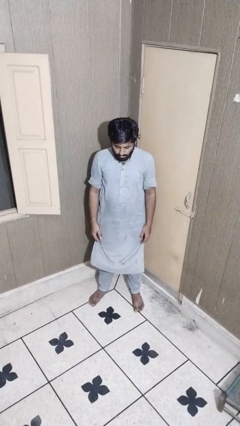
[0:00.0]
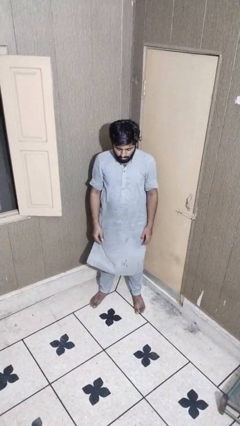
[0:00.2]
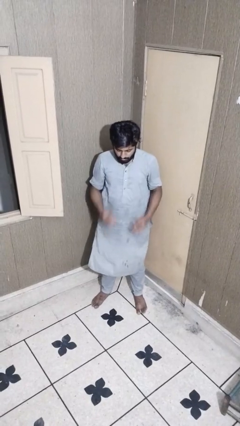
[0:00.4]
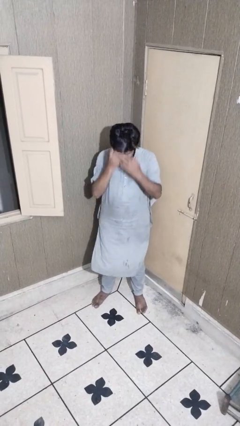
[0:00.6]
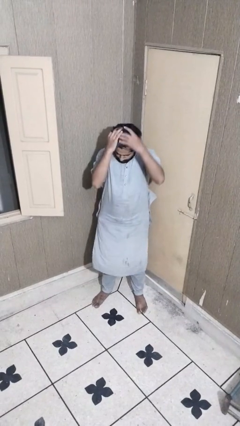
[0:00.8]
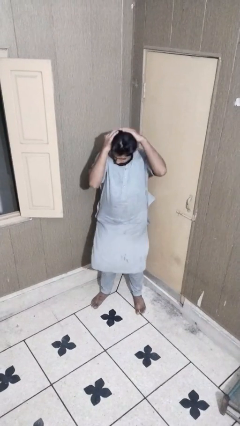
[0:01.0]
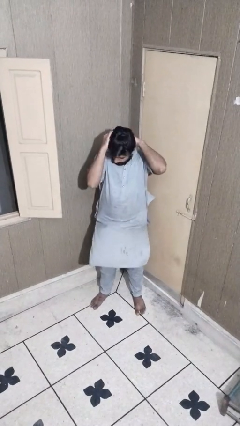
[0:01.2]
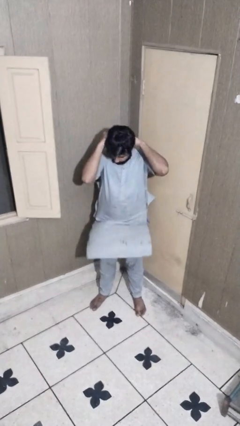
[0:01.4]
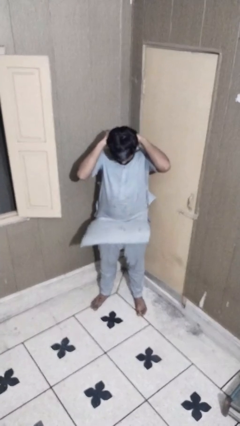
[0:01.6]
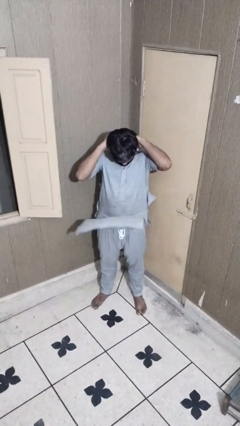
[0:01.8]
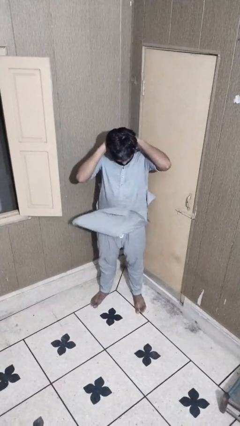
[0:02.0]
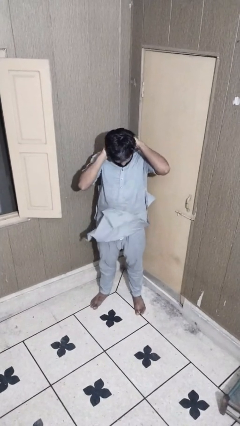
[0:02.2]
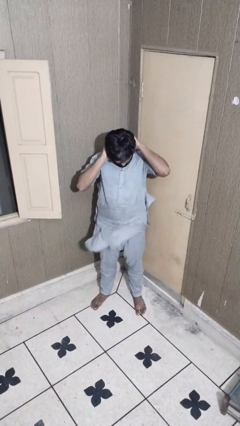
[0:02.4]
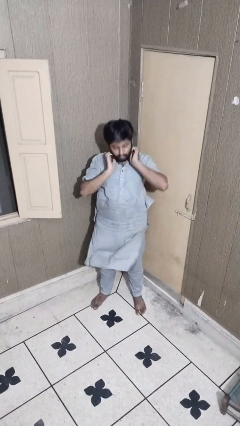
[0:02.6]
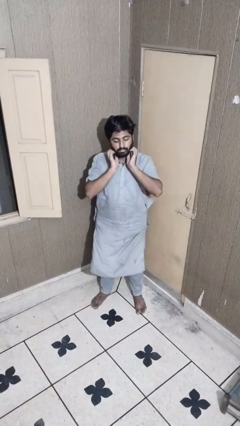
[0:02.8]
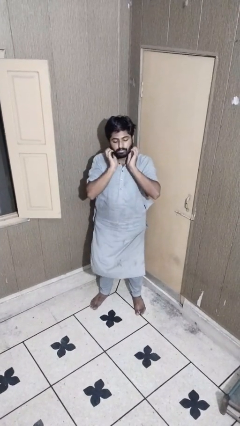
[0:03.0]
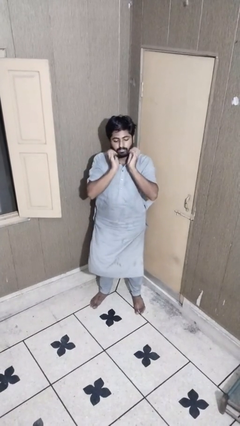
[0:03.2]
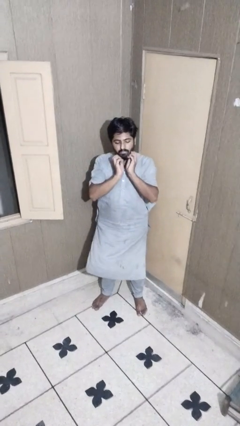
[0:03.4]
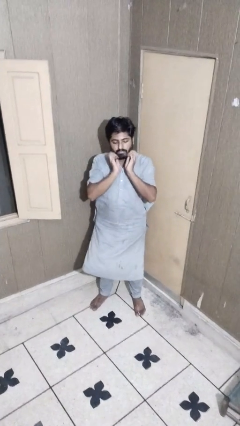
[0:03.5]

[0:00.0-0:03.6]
person scratches face

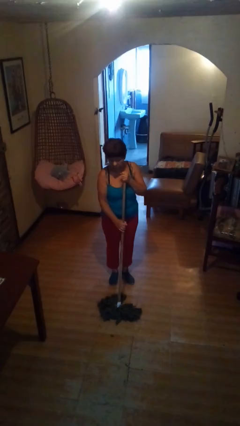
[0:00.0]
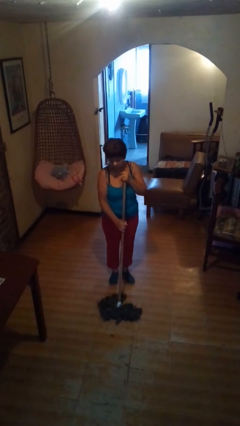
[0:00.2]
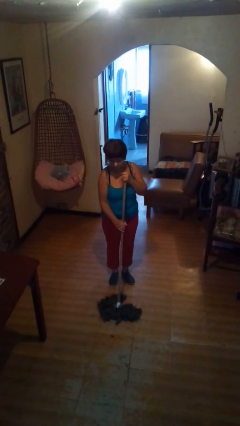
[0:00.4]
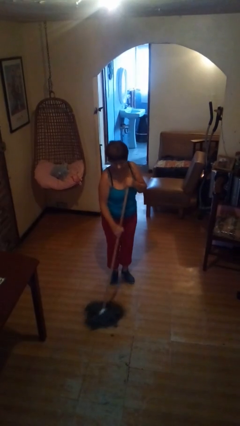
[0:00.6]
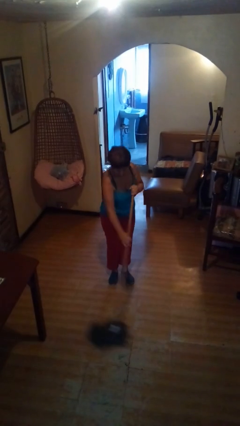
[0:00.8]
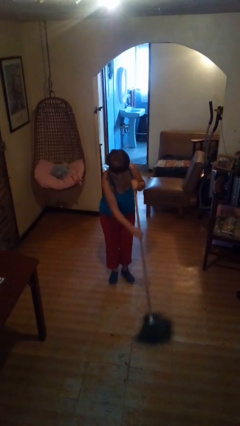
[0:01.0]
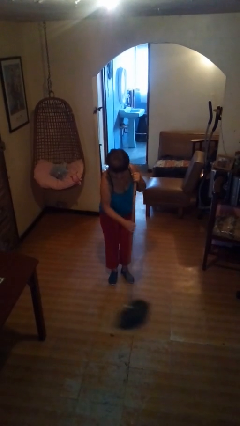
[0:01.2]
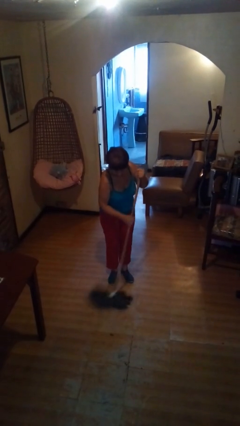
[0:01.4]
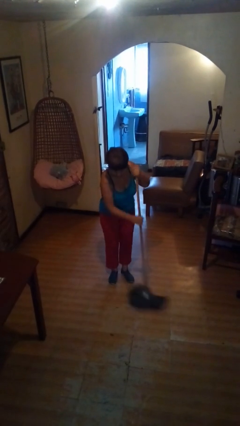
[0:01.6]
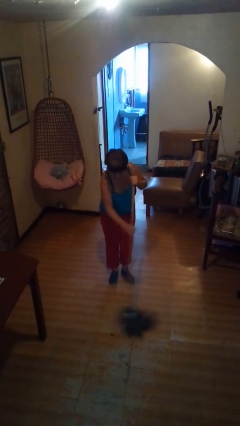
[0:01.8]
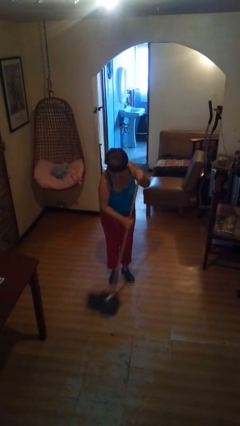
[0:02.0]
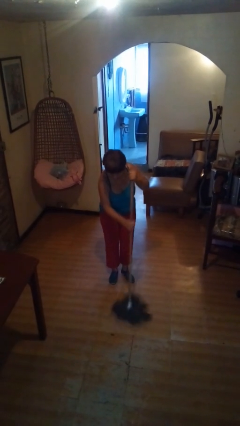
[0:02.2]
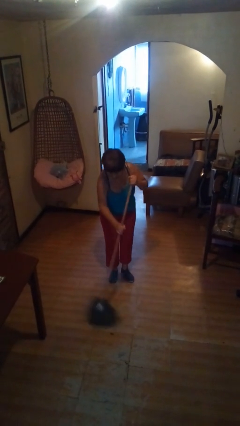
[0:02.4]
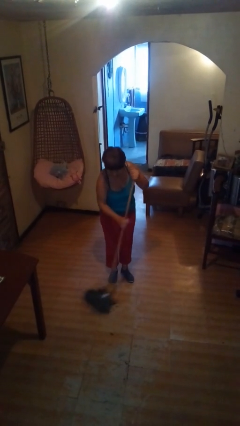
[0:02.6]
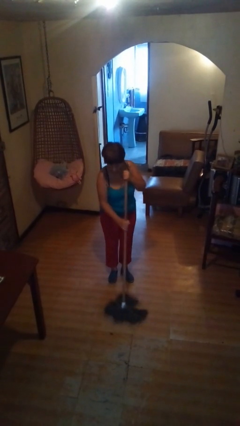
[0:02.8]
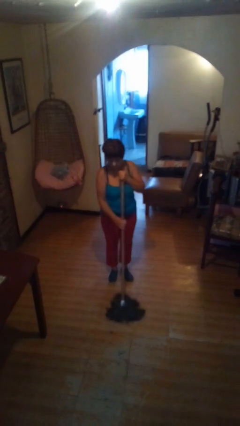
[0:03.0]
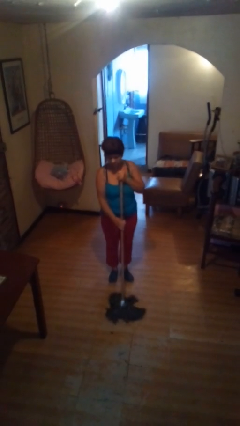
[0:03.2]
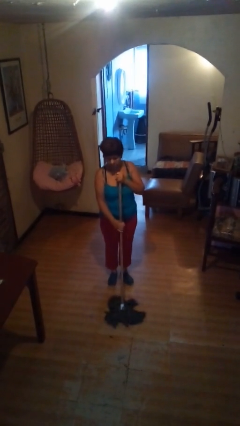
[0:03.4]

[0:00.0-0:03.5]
person mops

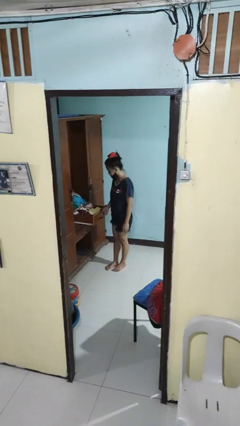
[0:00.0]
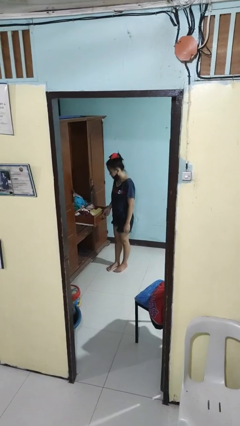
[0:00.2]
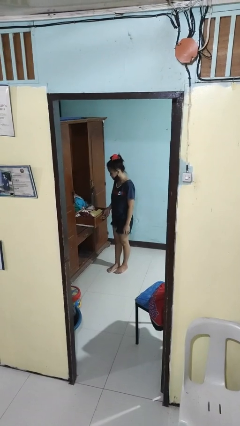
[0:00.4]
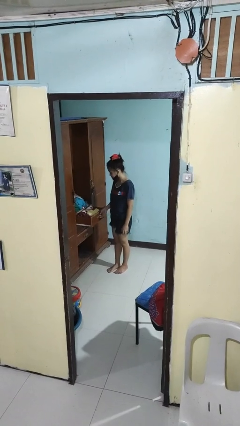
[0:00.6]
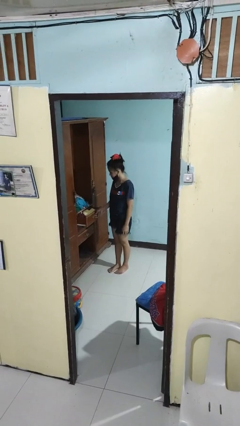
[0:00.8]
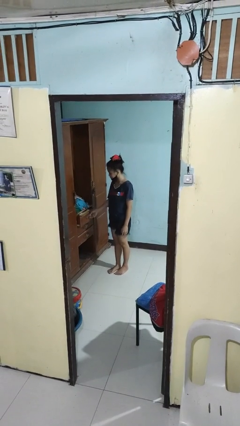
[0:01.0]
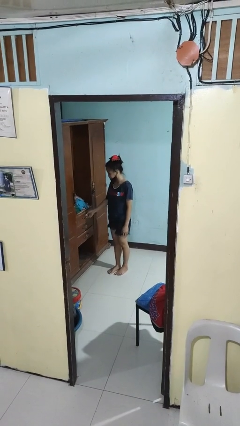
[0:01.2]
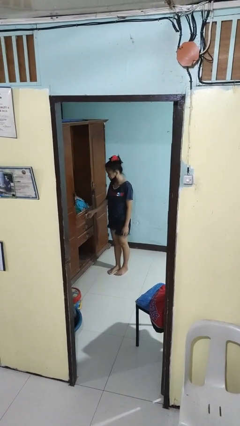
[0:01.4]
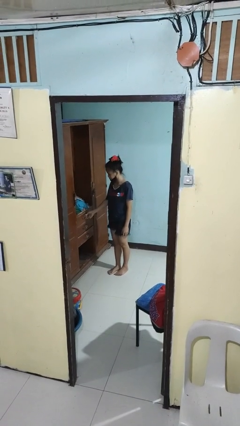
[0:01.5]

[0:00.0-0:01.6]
person closes dresser drawer

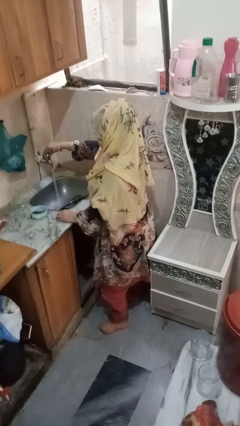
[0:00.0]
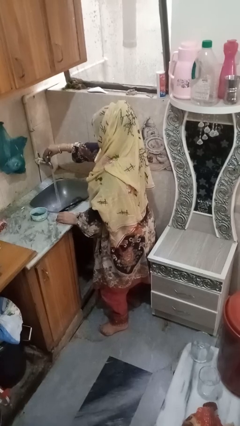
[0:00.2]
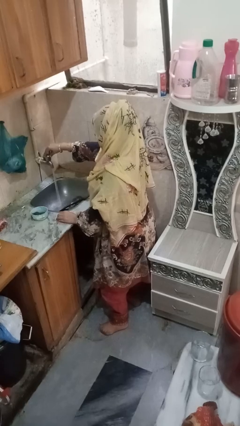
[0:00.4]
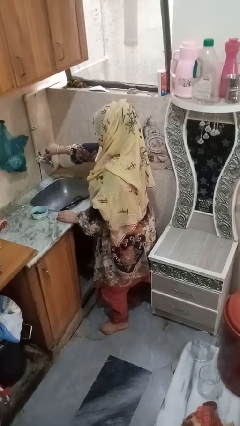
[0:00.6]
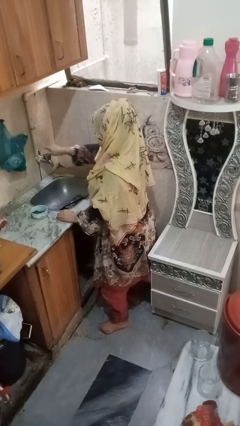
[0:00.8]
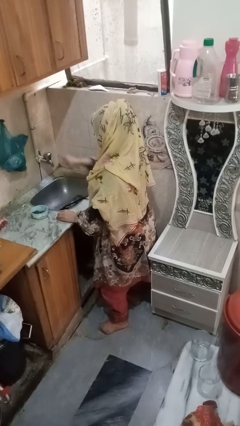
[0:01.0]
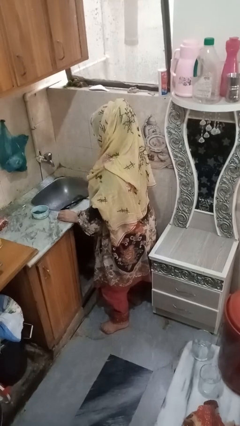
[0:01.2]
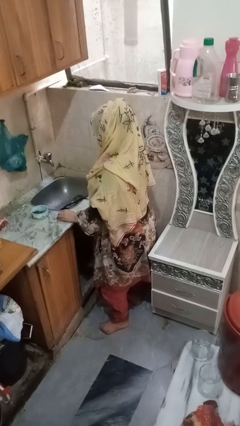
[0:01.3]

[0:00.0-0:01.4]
person turns off faucet

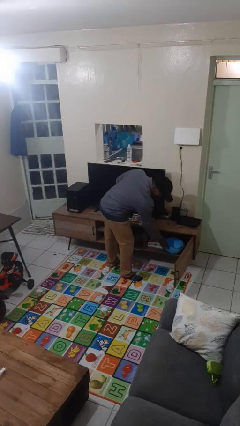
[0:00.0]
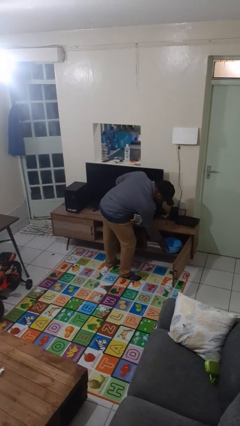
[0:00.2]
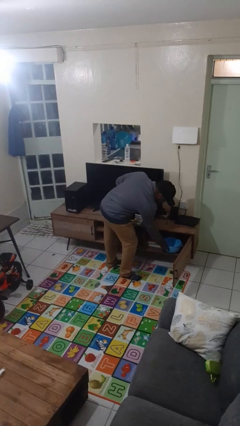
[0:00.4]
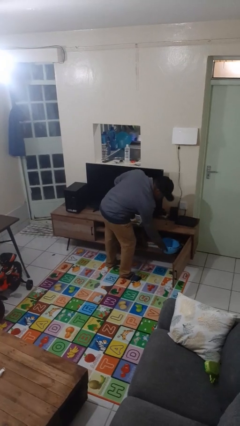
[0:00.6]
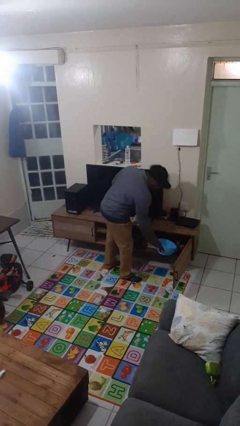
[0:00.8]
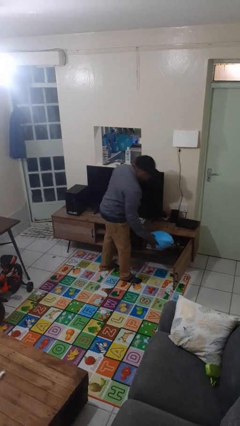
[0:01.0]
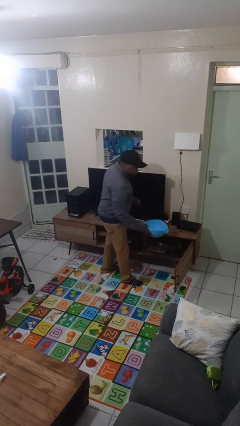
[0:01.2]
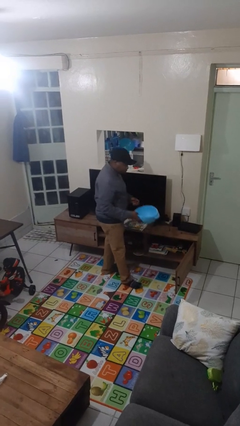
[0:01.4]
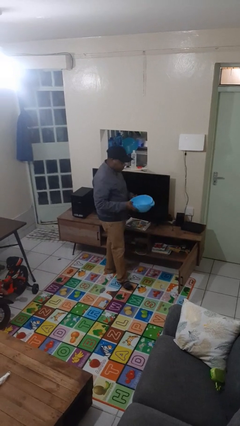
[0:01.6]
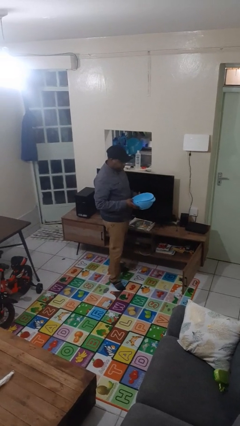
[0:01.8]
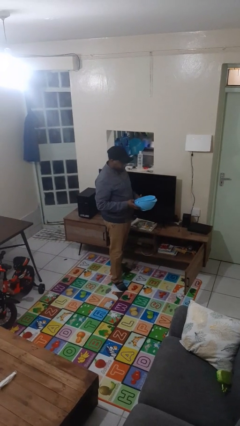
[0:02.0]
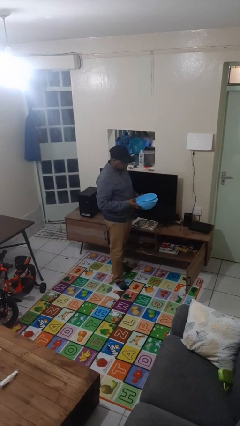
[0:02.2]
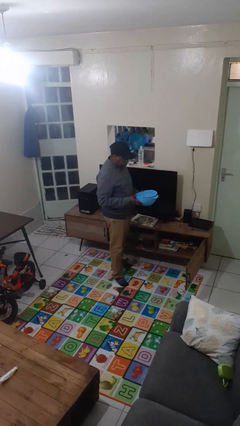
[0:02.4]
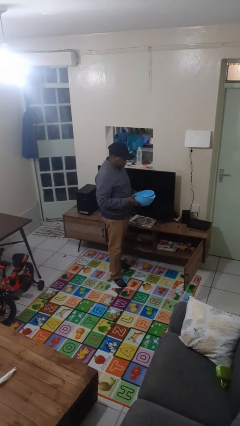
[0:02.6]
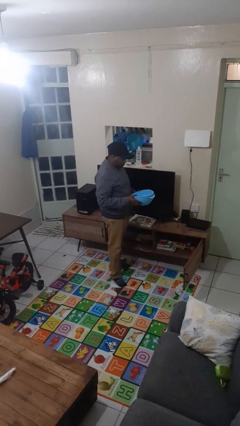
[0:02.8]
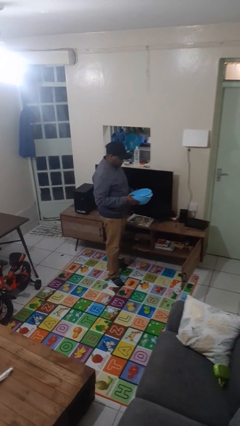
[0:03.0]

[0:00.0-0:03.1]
person picks up object from cabinet

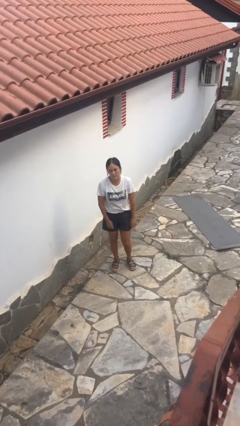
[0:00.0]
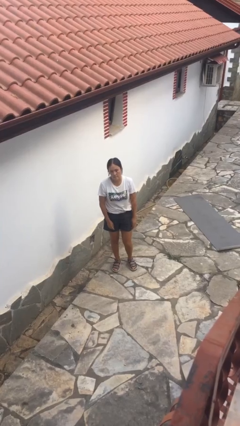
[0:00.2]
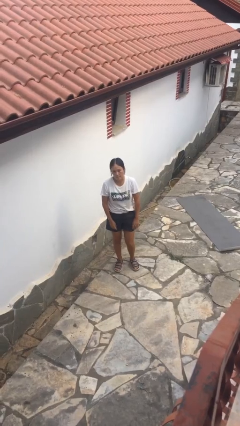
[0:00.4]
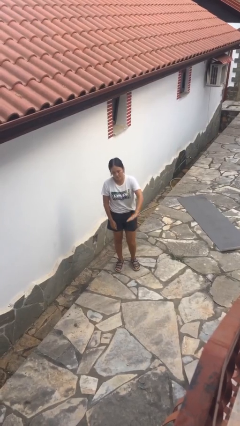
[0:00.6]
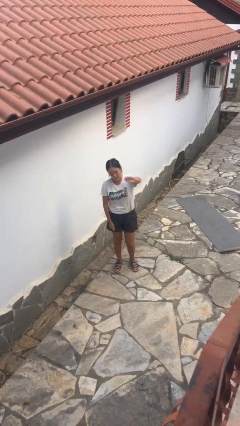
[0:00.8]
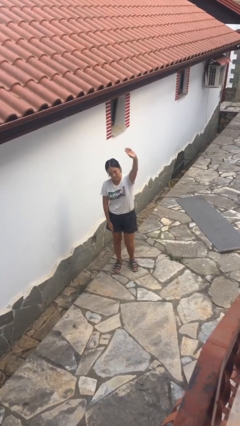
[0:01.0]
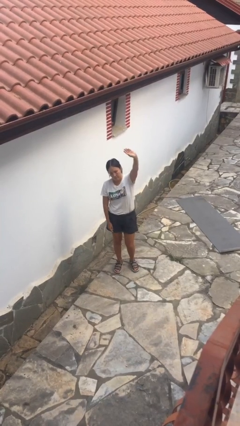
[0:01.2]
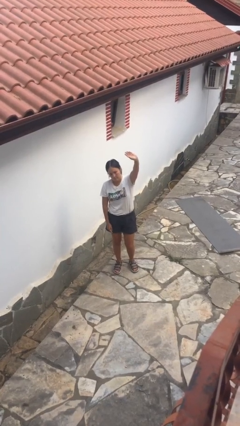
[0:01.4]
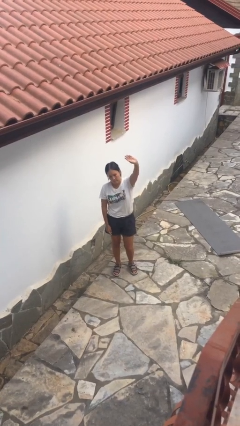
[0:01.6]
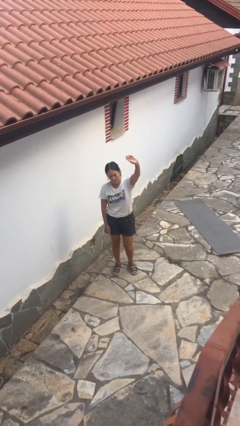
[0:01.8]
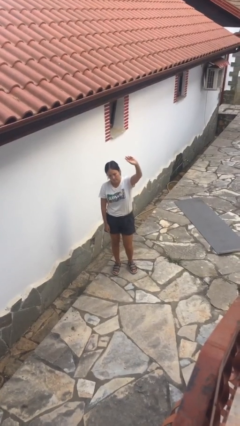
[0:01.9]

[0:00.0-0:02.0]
person gestures swipe up

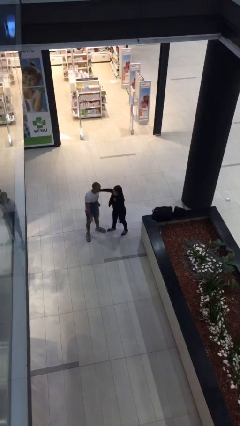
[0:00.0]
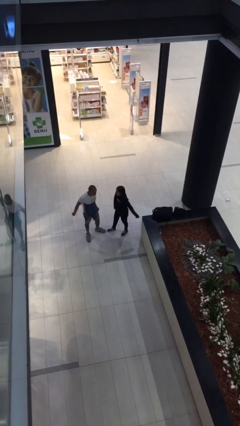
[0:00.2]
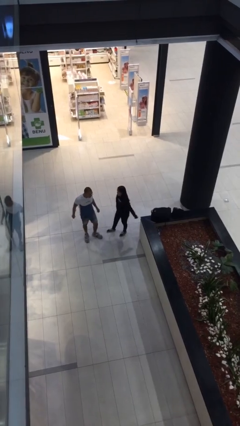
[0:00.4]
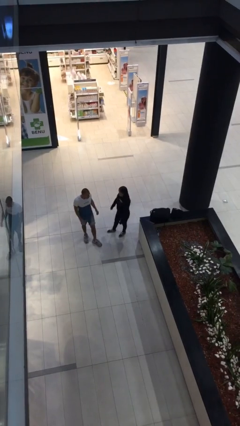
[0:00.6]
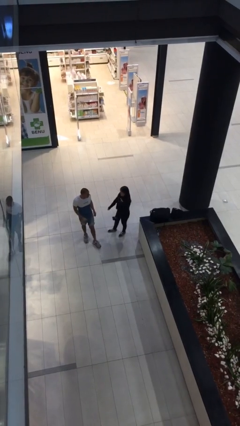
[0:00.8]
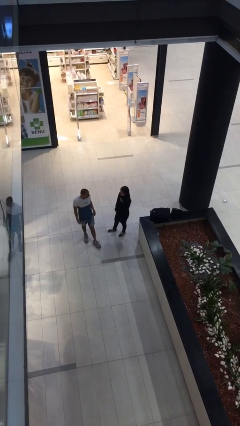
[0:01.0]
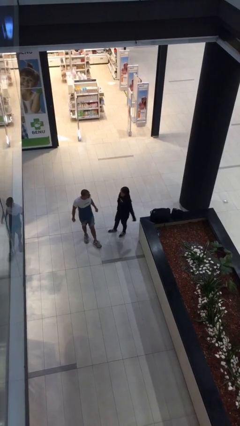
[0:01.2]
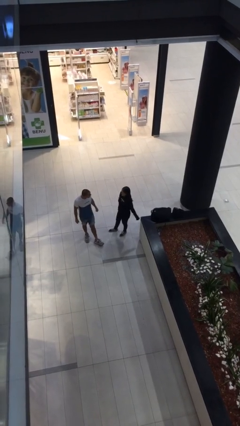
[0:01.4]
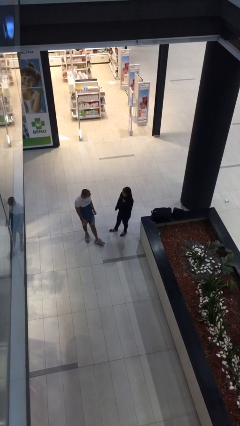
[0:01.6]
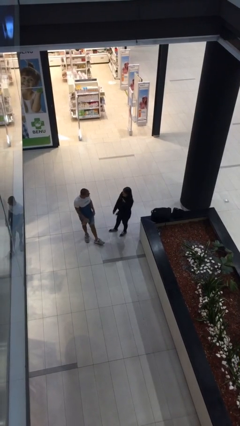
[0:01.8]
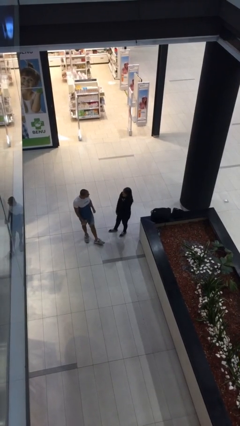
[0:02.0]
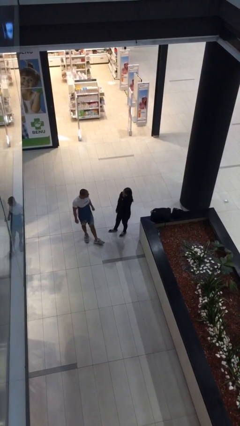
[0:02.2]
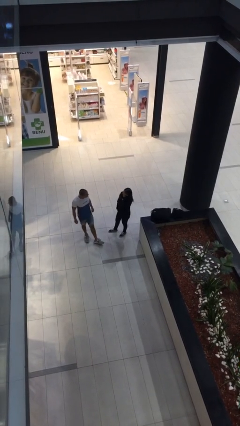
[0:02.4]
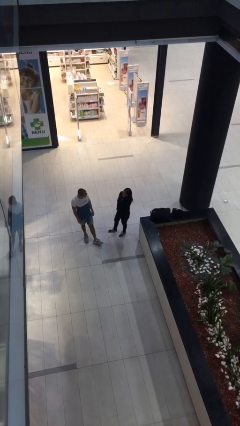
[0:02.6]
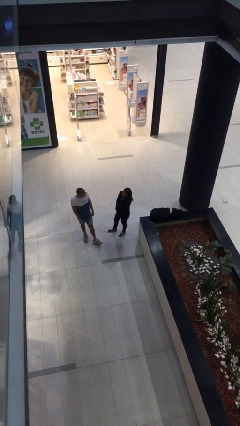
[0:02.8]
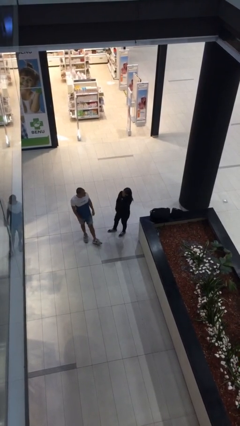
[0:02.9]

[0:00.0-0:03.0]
person talks to person
